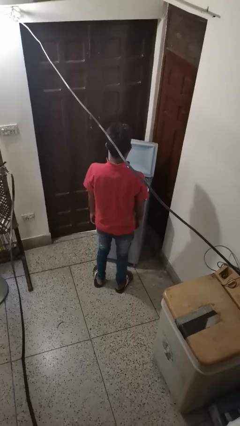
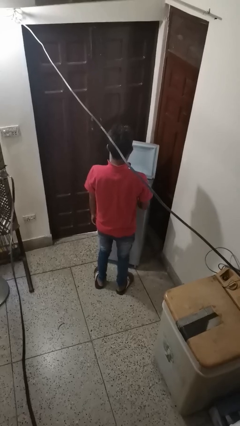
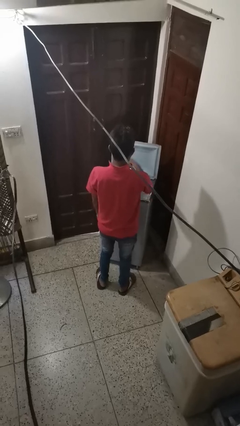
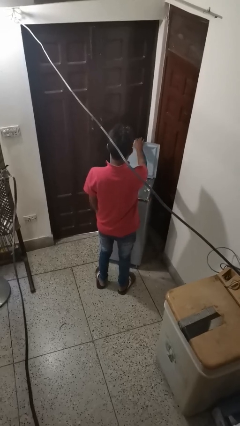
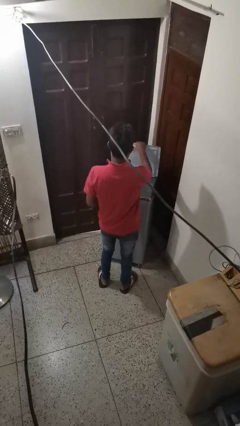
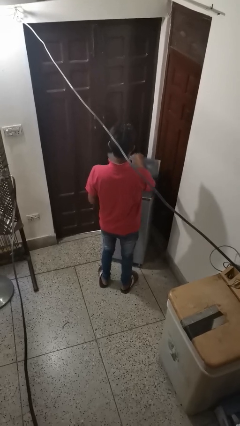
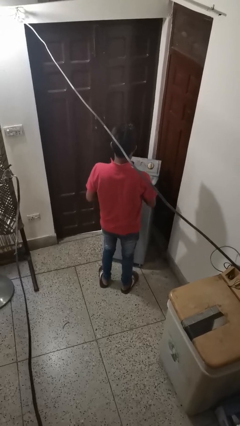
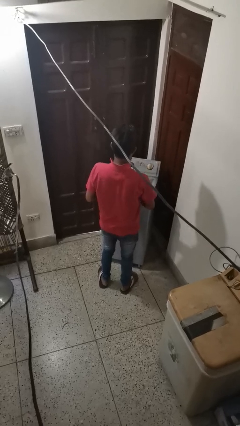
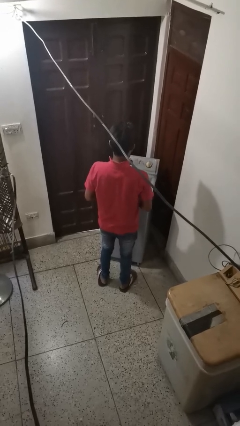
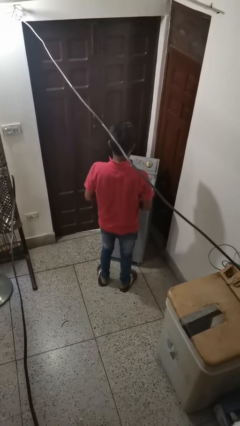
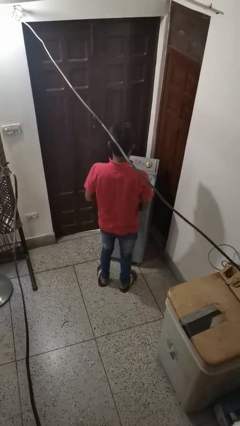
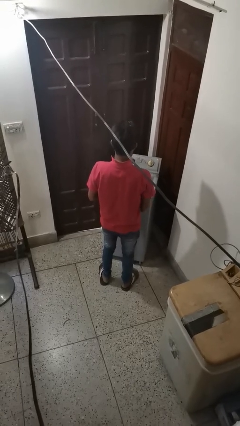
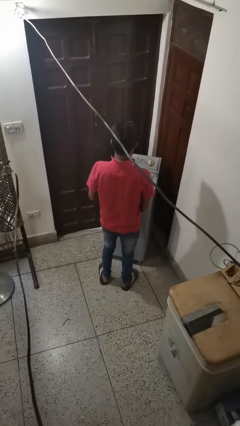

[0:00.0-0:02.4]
person closes clothes washer

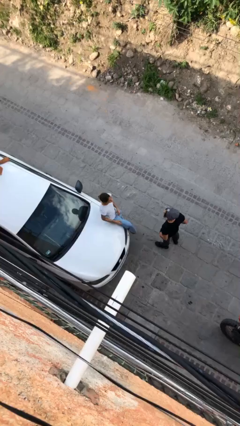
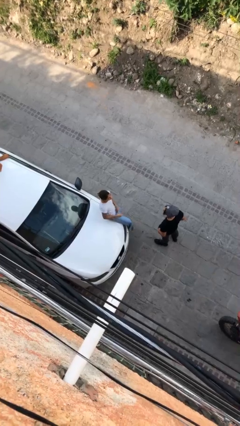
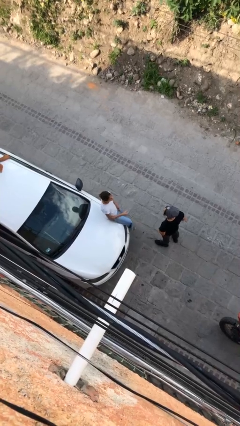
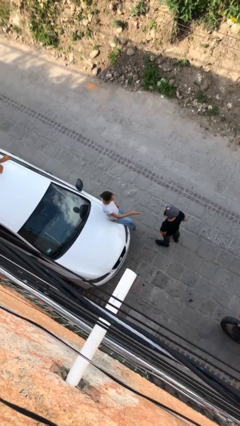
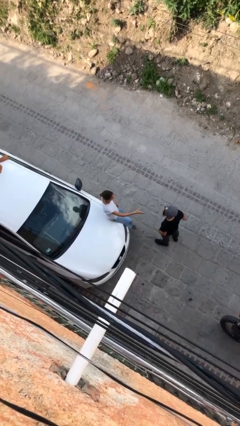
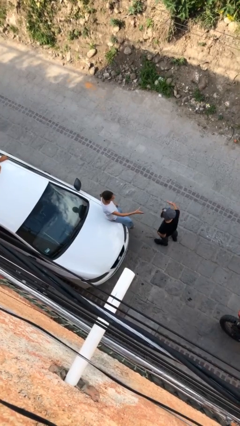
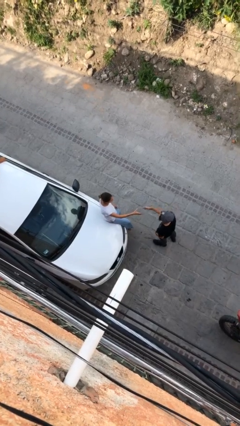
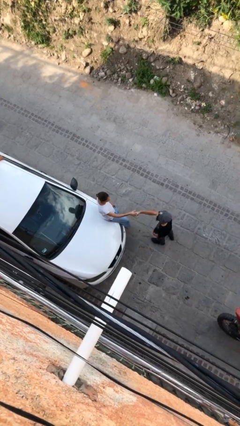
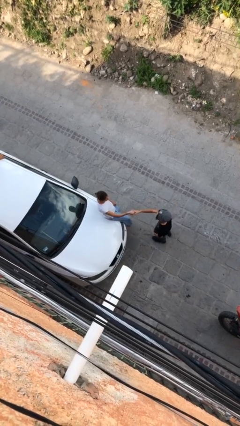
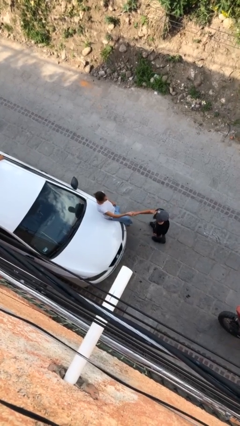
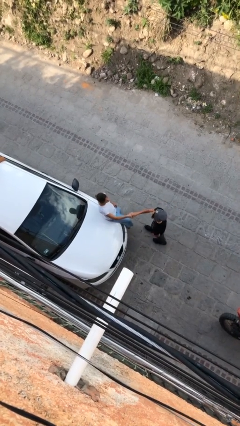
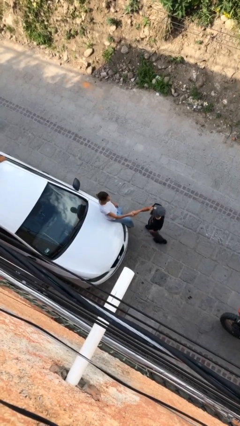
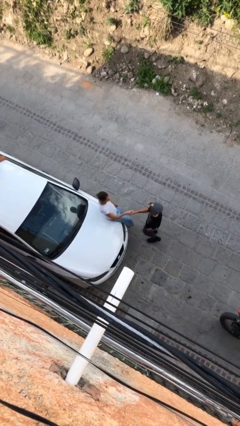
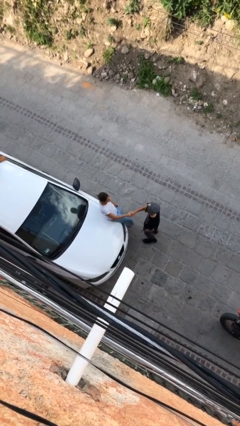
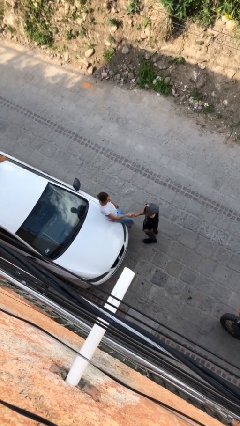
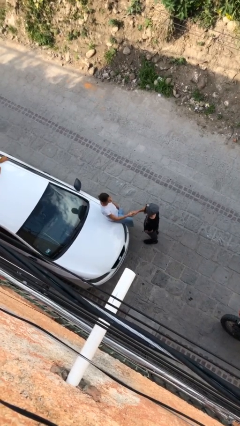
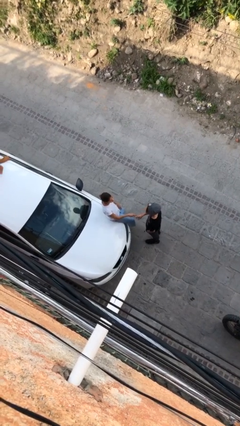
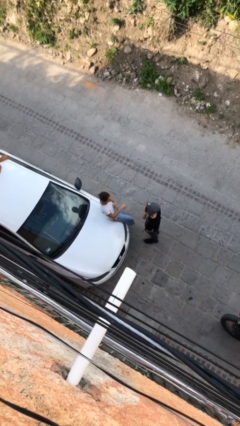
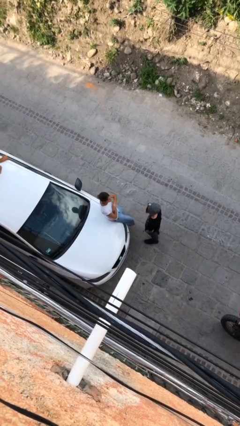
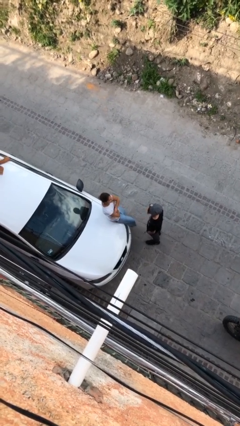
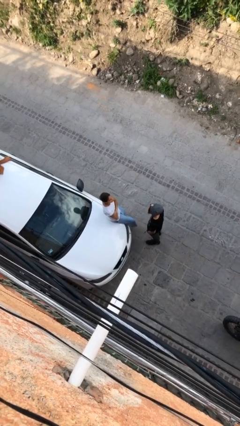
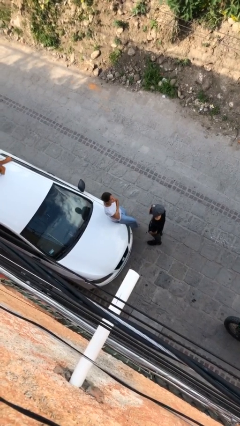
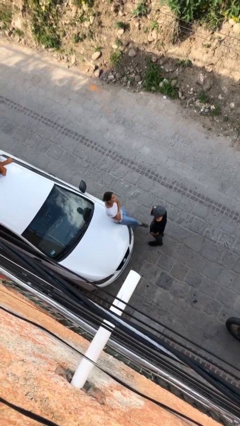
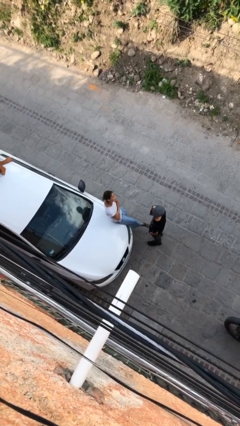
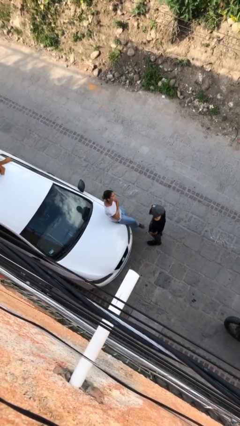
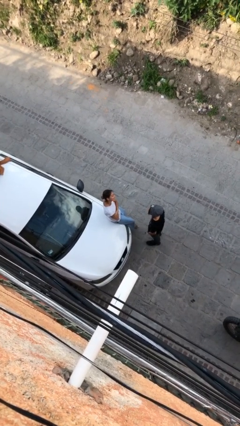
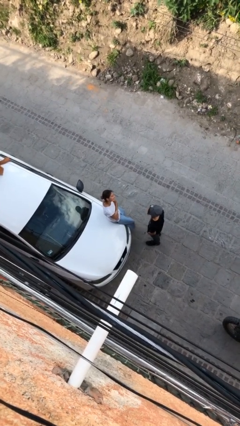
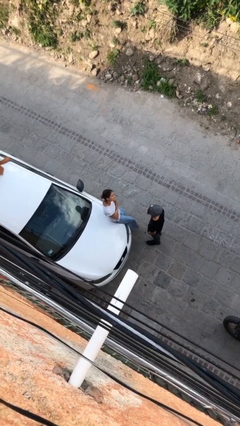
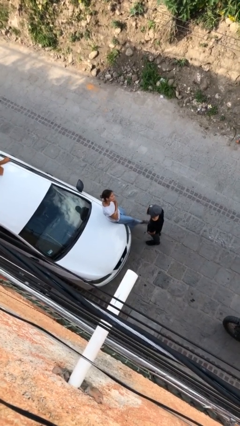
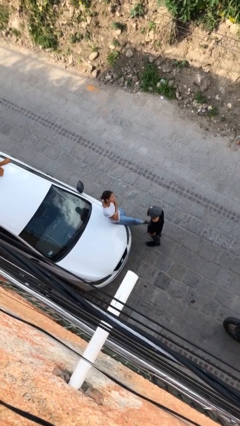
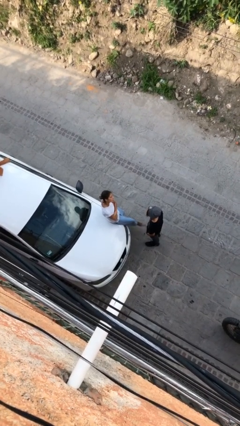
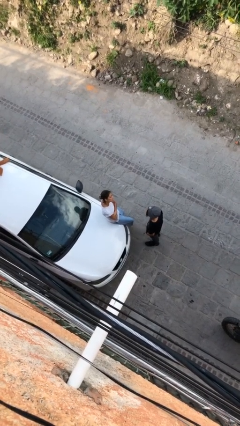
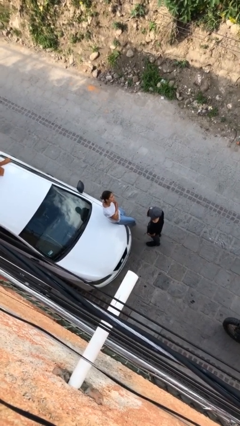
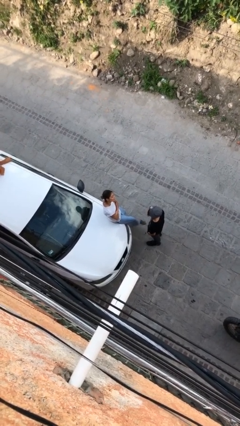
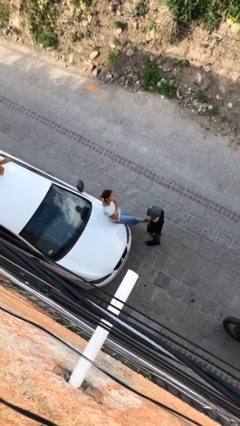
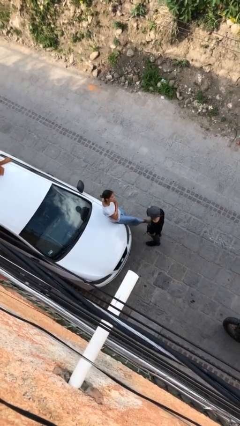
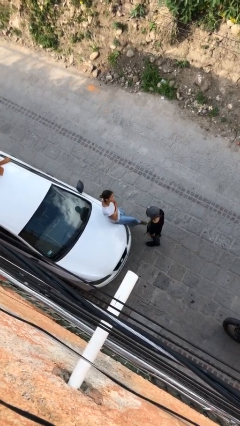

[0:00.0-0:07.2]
person shakes hand

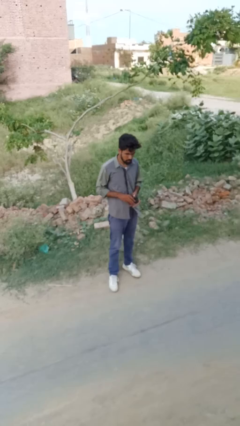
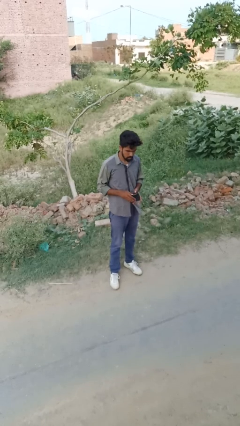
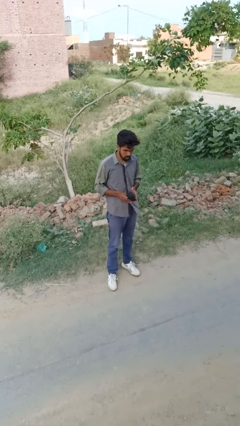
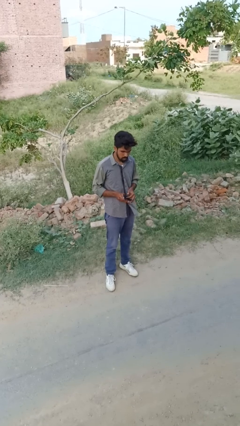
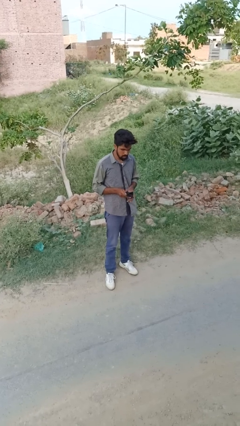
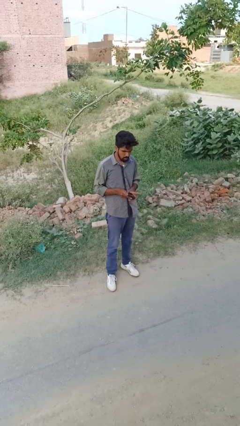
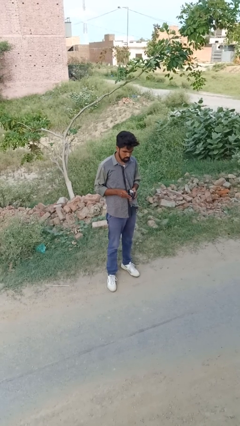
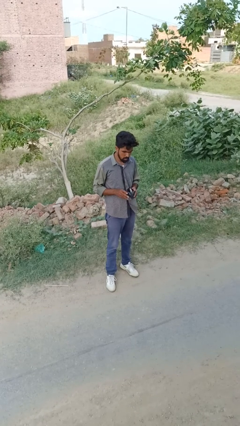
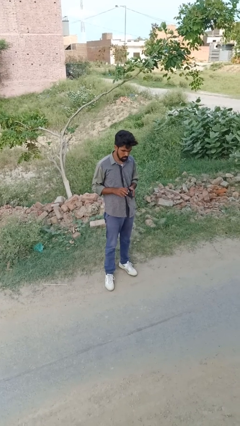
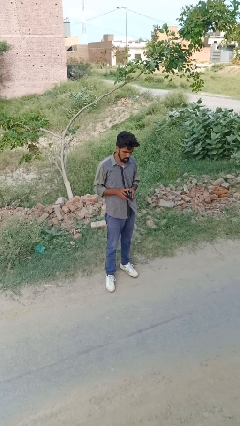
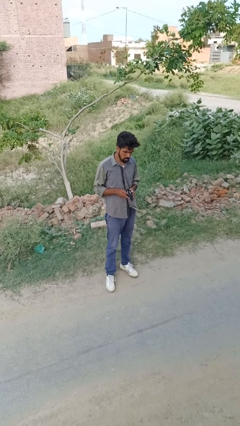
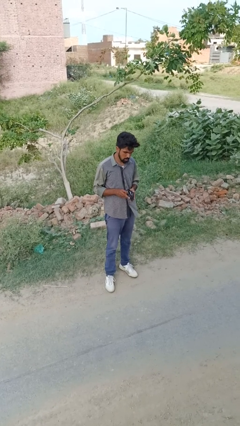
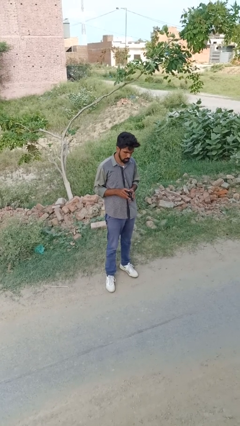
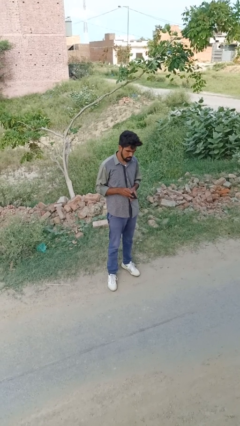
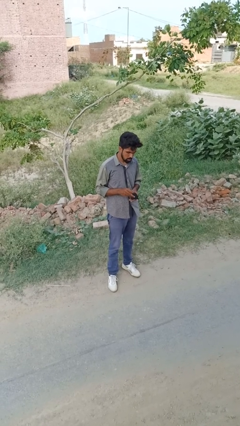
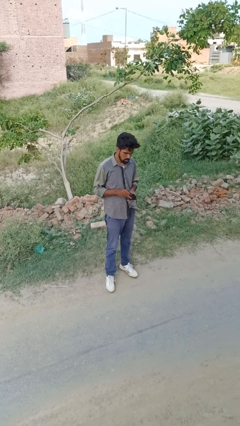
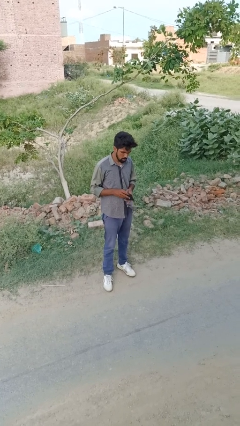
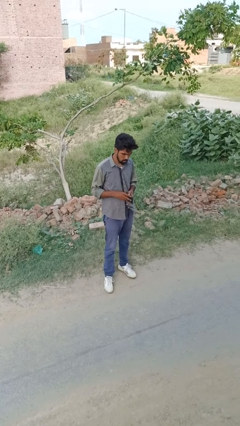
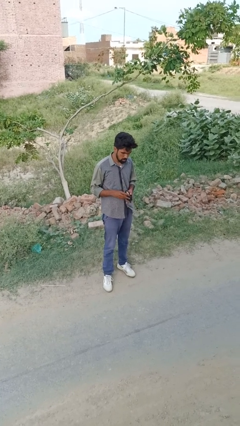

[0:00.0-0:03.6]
person searches in purse

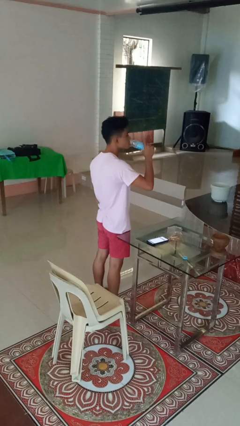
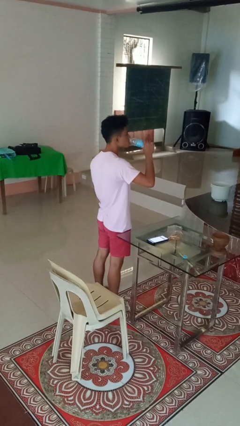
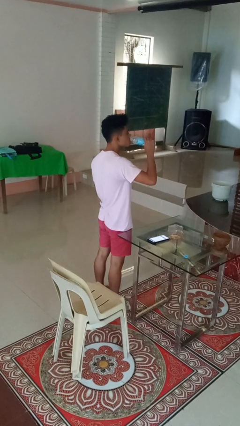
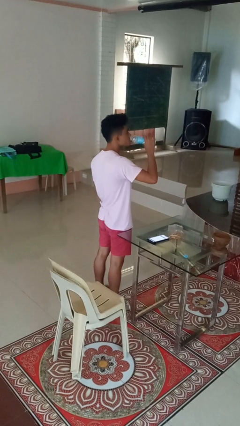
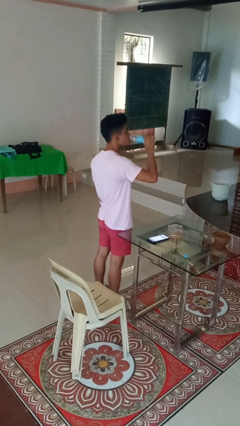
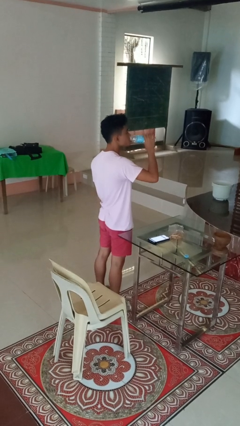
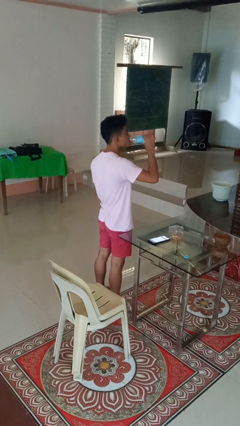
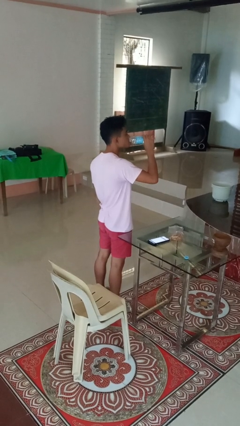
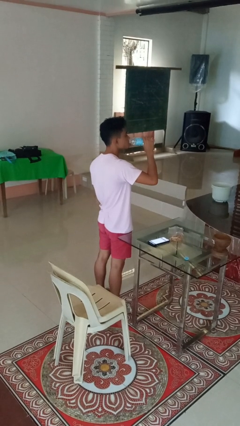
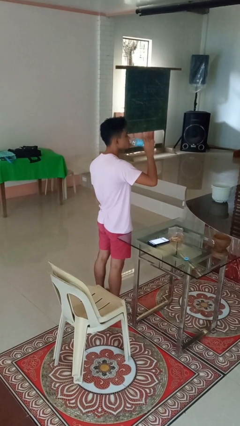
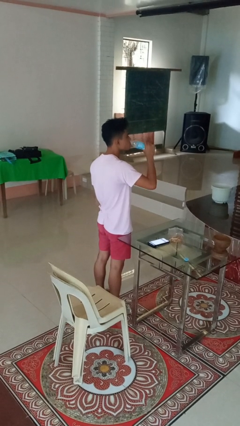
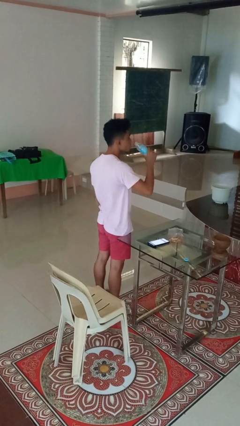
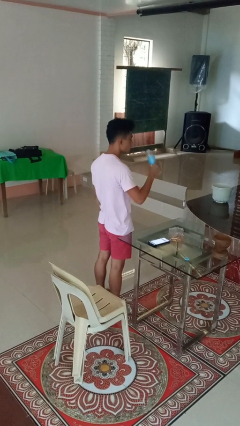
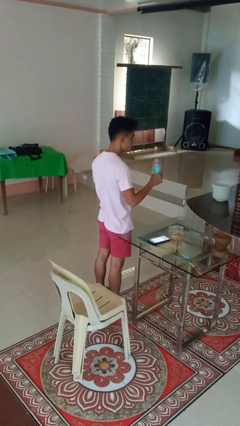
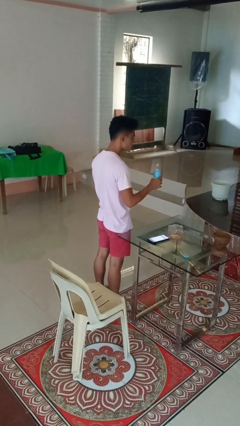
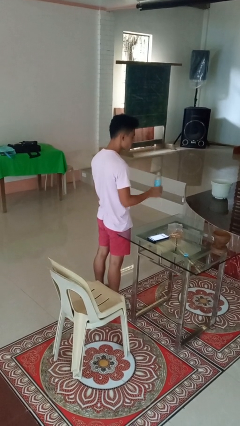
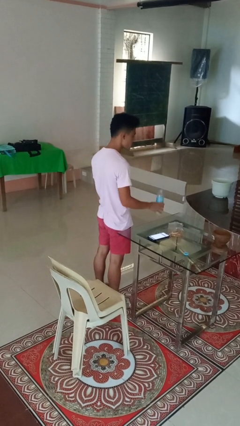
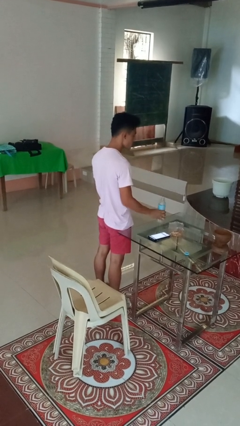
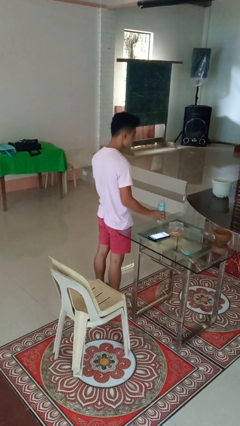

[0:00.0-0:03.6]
person drinks from bottle

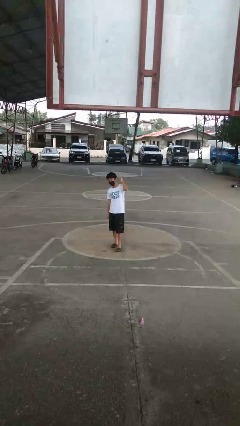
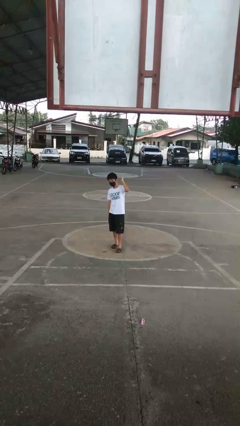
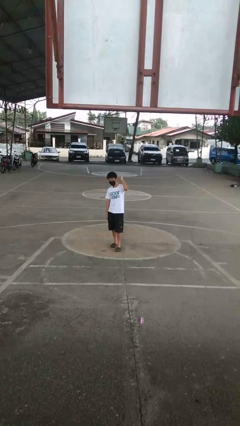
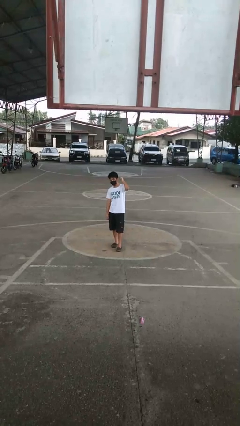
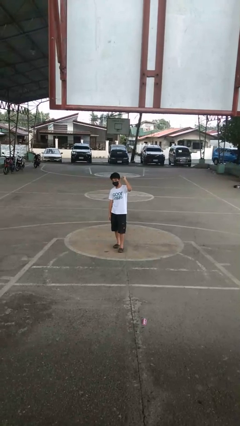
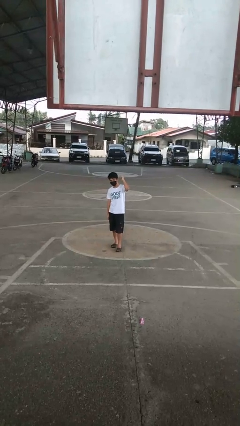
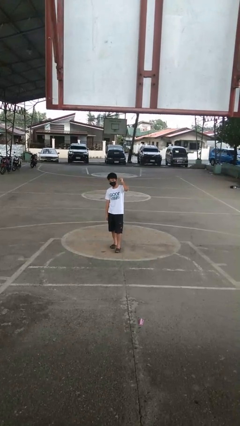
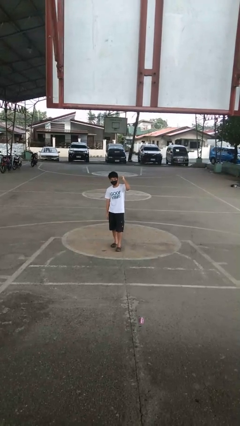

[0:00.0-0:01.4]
person gestures behind me
